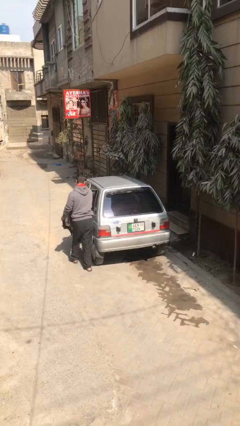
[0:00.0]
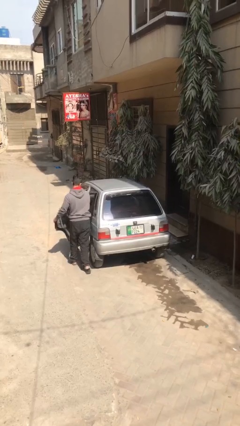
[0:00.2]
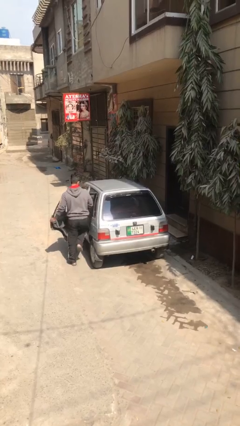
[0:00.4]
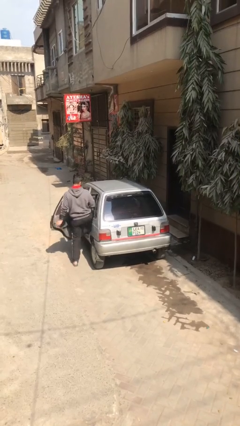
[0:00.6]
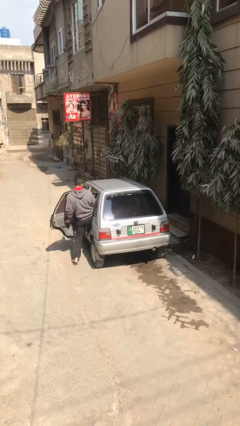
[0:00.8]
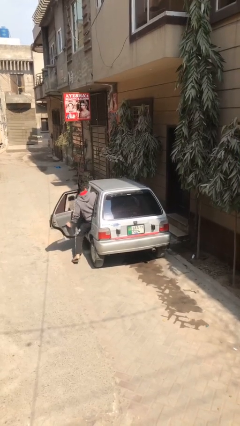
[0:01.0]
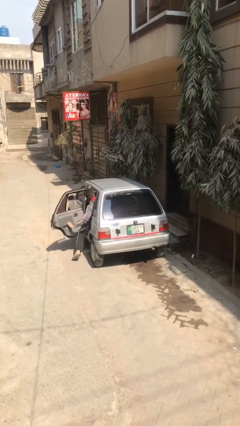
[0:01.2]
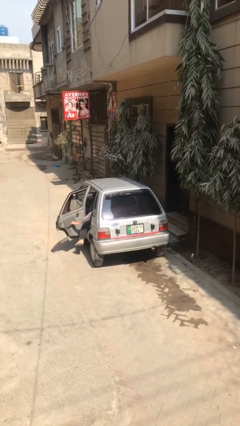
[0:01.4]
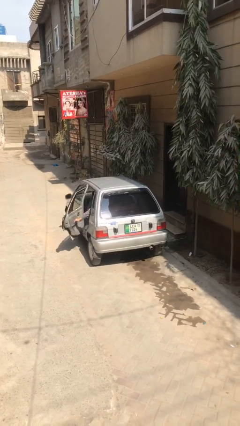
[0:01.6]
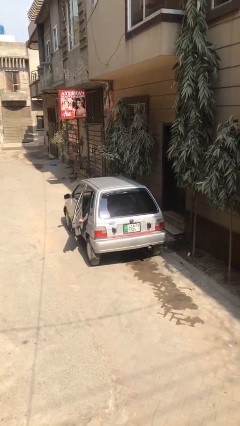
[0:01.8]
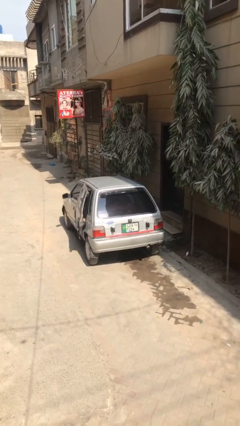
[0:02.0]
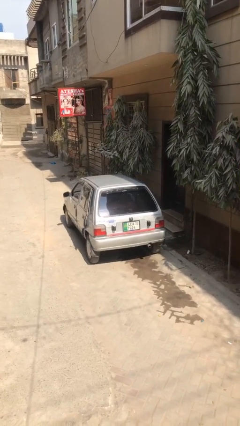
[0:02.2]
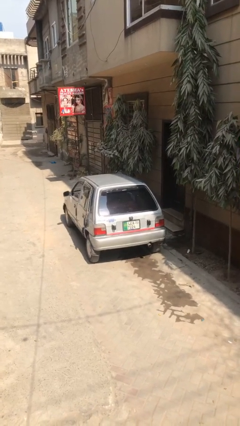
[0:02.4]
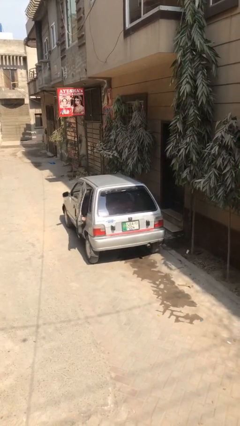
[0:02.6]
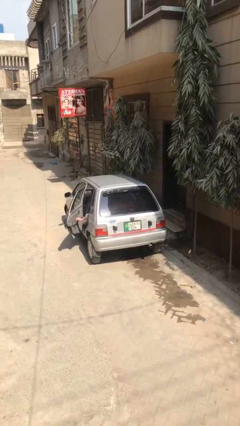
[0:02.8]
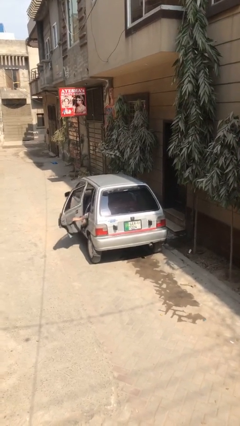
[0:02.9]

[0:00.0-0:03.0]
car picks up person

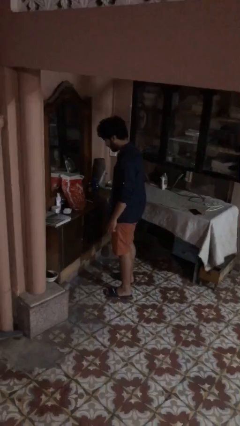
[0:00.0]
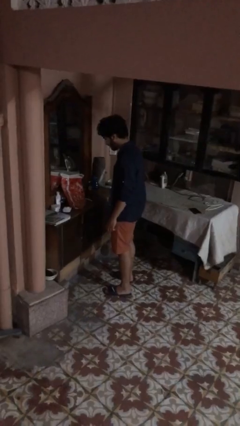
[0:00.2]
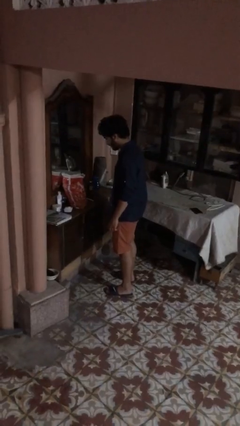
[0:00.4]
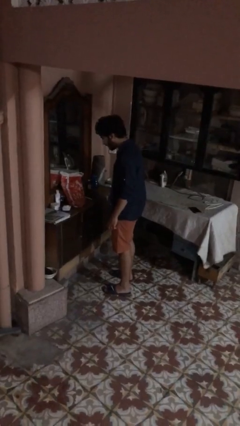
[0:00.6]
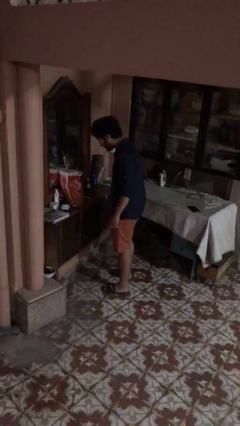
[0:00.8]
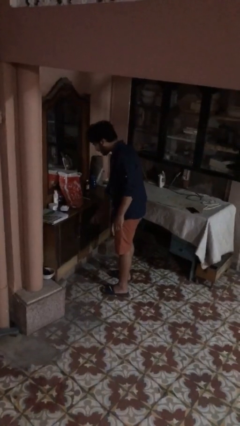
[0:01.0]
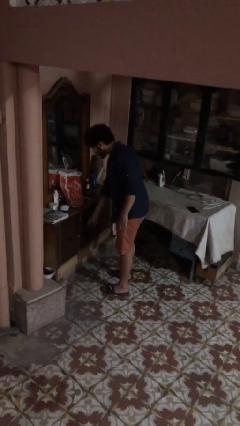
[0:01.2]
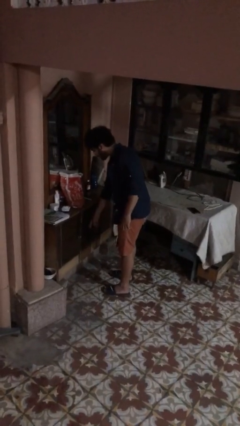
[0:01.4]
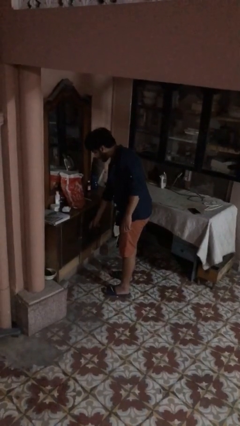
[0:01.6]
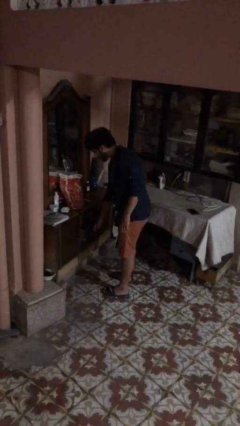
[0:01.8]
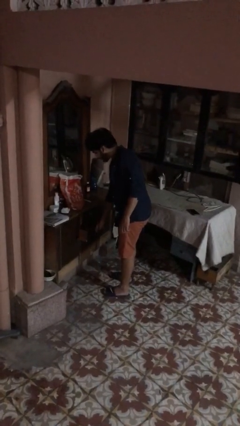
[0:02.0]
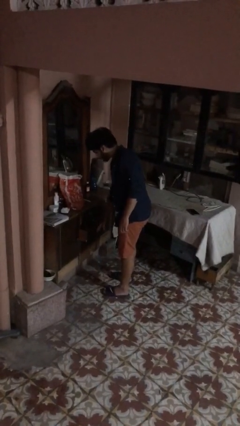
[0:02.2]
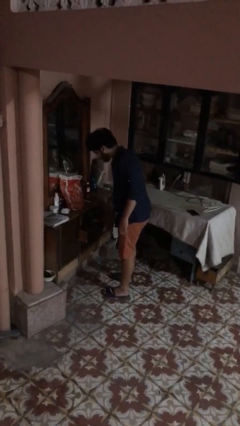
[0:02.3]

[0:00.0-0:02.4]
person opens dresser drawer

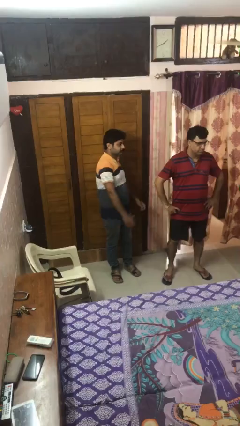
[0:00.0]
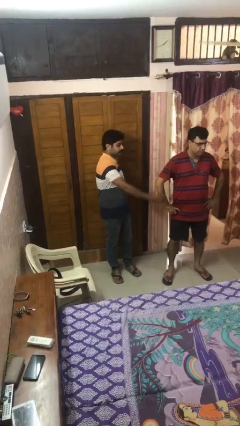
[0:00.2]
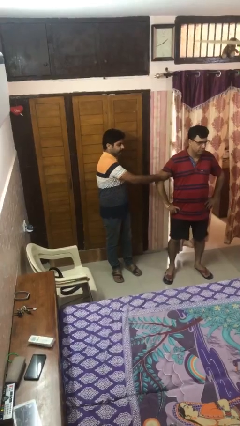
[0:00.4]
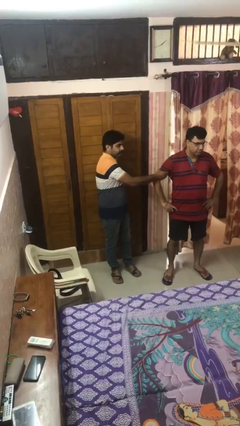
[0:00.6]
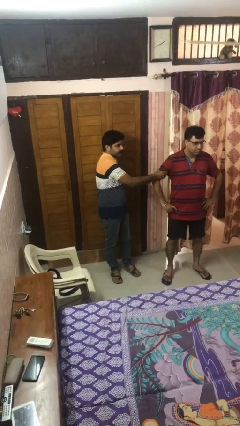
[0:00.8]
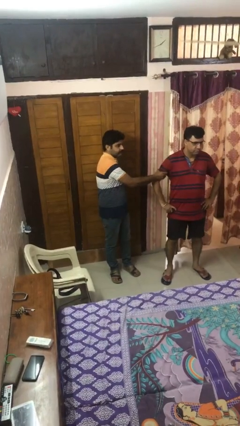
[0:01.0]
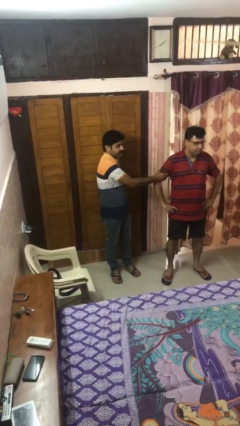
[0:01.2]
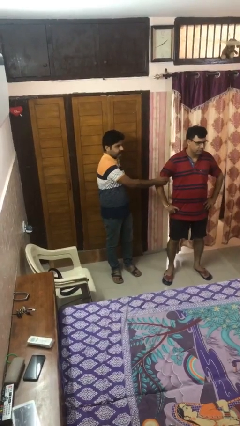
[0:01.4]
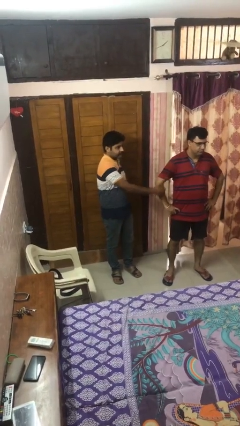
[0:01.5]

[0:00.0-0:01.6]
person grabs person by bicep

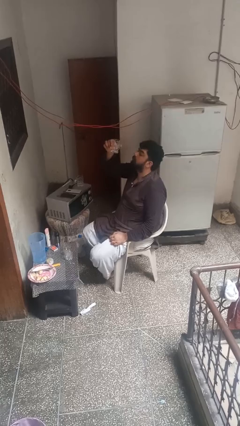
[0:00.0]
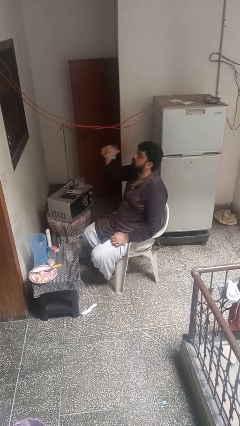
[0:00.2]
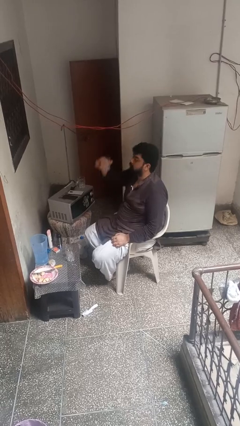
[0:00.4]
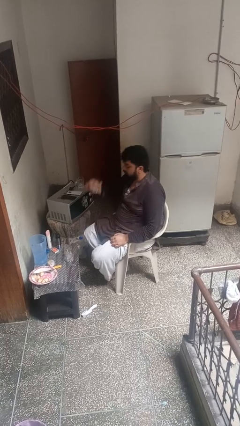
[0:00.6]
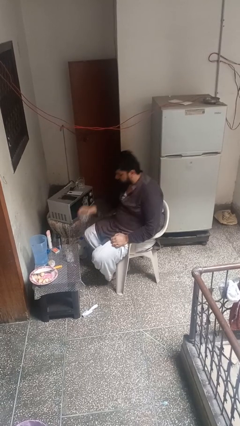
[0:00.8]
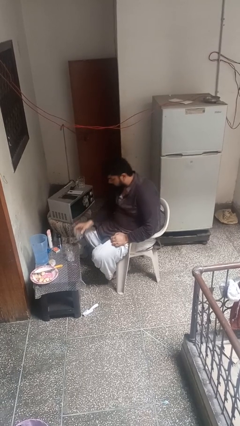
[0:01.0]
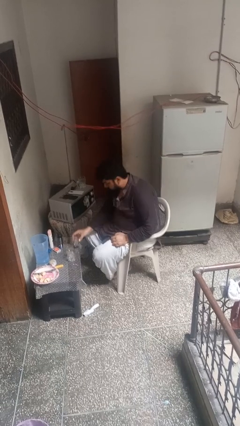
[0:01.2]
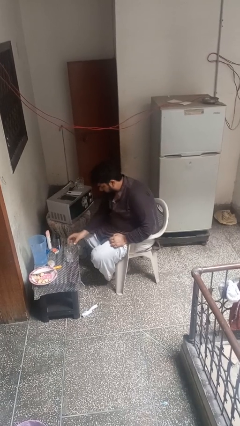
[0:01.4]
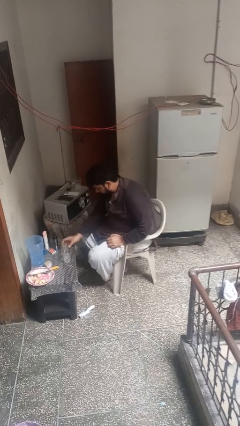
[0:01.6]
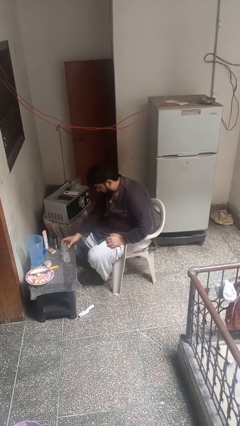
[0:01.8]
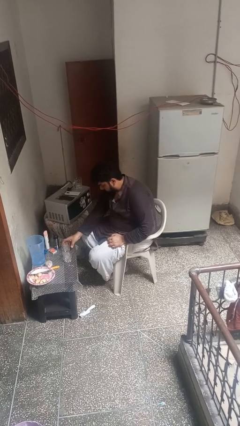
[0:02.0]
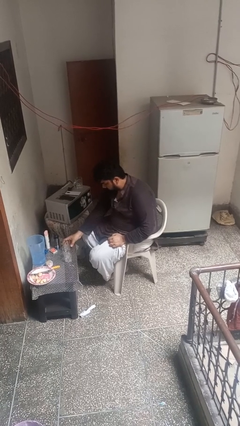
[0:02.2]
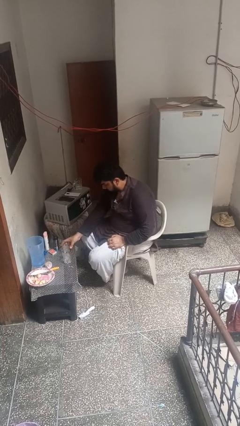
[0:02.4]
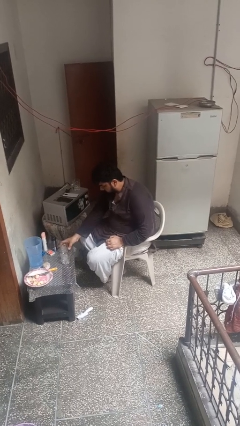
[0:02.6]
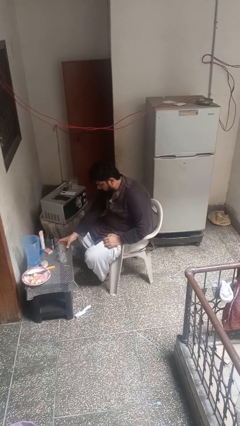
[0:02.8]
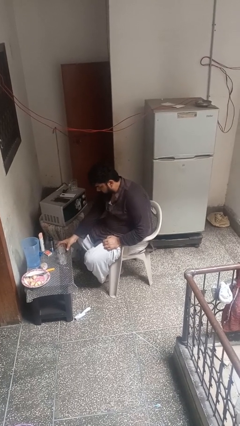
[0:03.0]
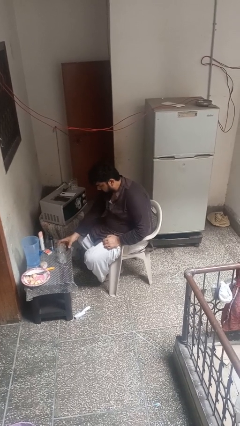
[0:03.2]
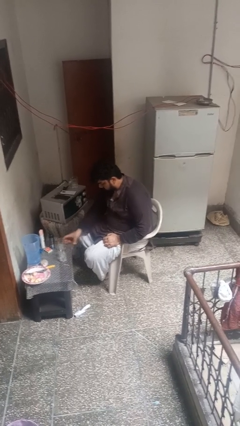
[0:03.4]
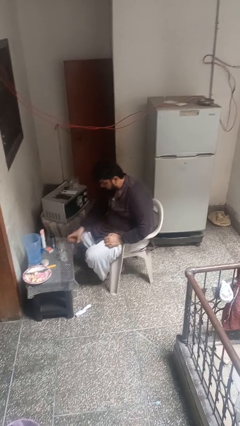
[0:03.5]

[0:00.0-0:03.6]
person puts down object on table

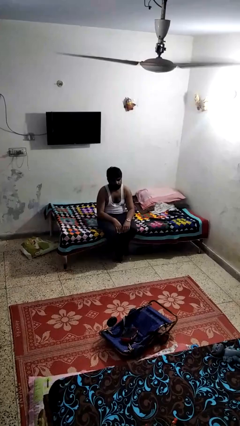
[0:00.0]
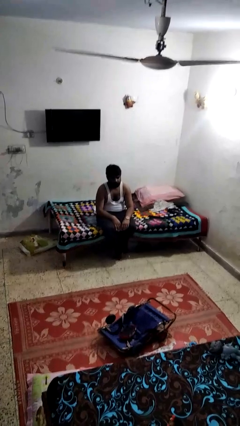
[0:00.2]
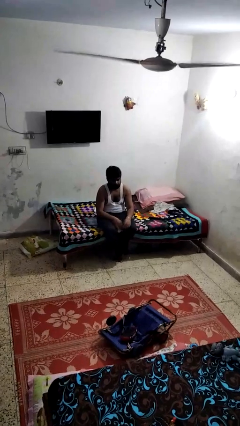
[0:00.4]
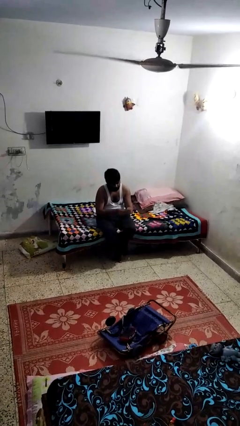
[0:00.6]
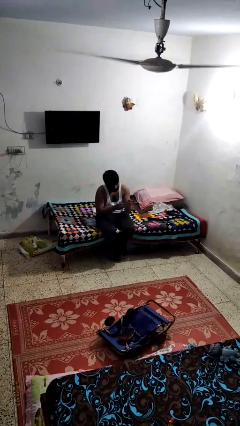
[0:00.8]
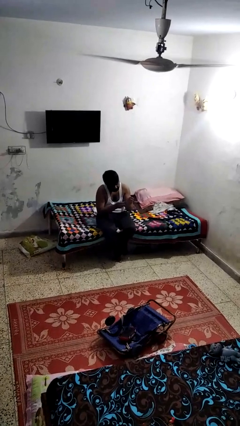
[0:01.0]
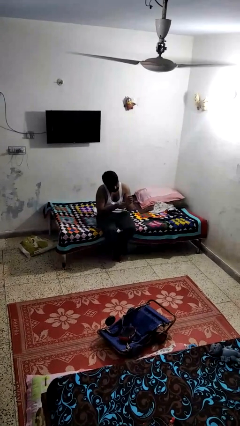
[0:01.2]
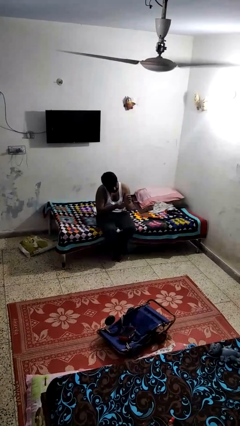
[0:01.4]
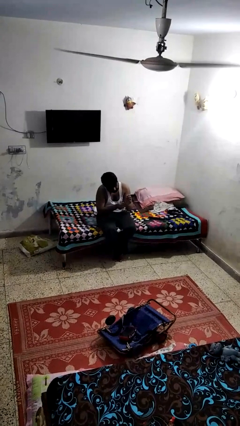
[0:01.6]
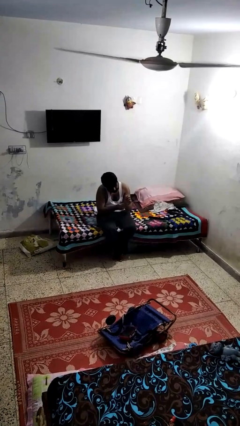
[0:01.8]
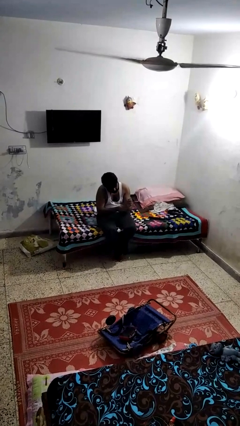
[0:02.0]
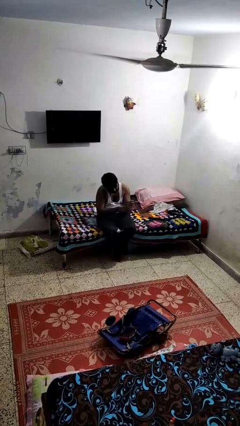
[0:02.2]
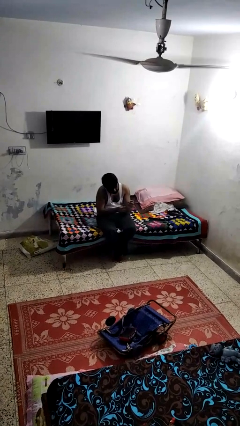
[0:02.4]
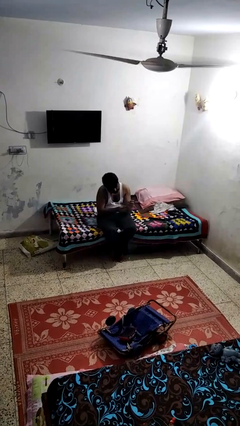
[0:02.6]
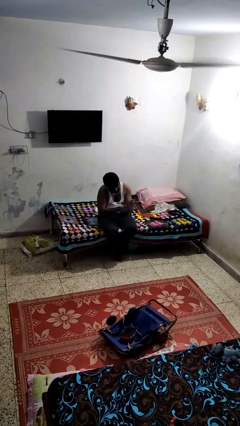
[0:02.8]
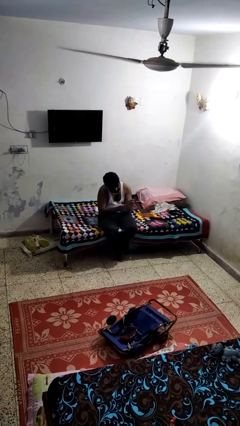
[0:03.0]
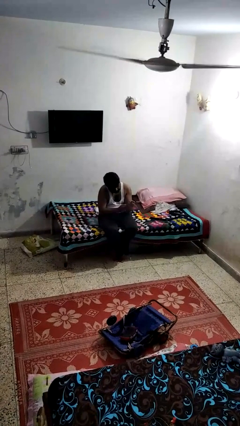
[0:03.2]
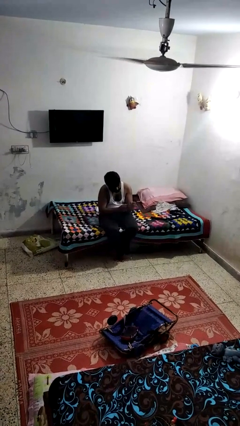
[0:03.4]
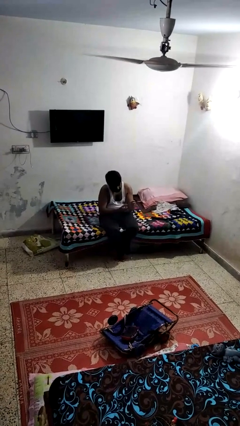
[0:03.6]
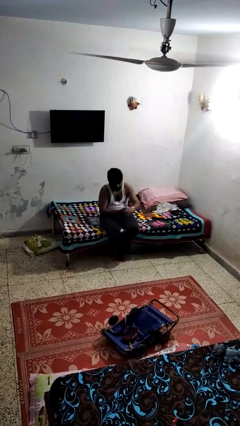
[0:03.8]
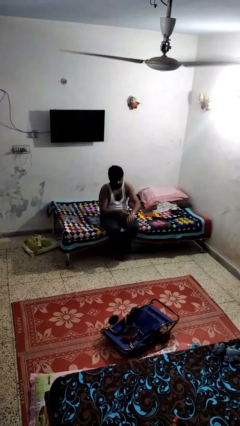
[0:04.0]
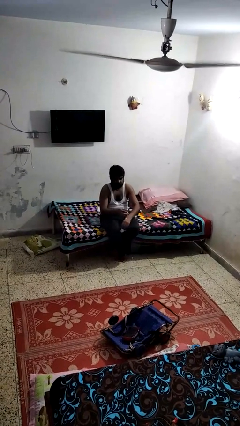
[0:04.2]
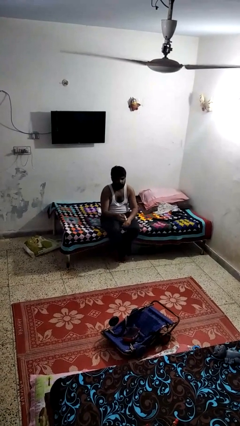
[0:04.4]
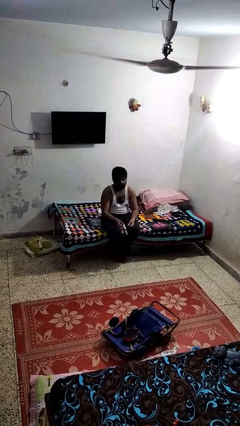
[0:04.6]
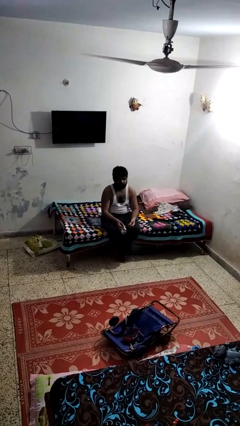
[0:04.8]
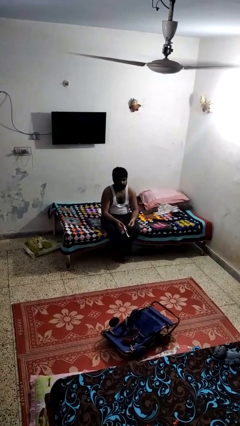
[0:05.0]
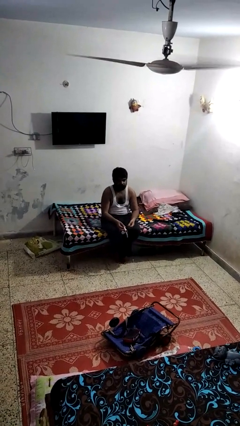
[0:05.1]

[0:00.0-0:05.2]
person takes off wristwatch

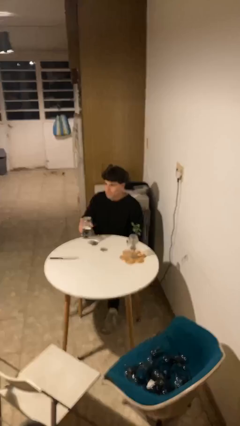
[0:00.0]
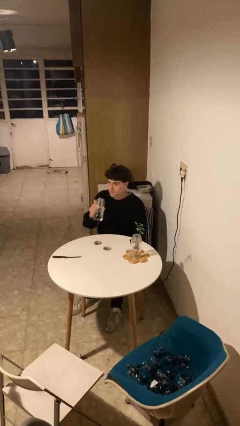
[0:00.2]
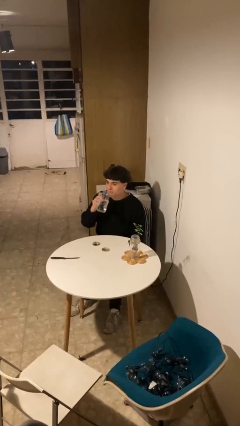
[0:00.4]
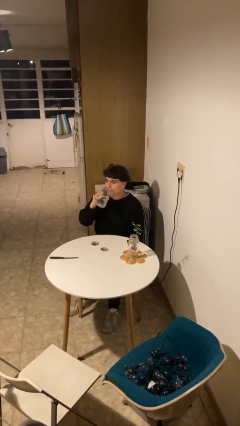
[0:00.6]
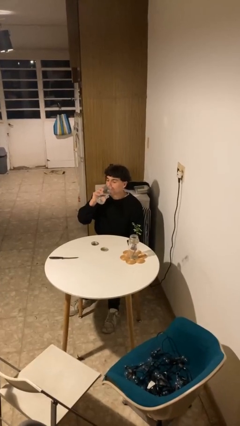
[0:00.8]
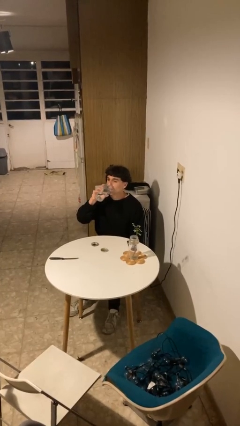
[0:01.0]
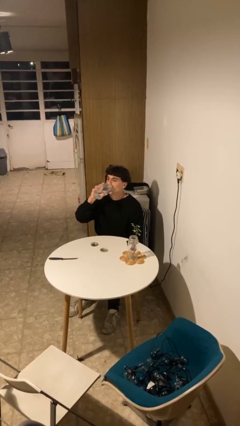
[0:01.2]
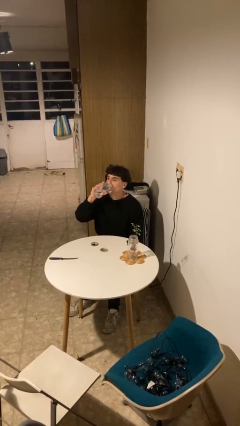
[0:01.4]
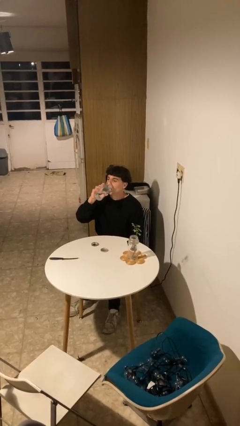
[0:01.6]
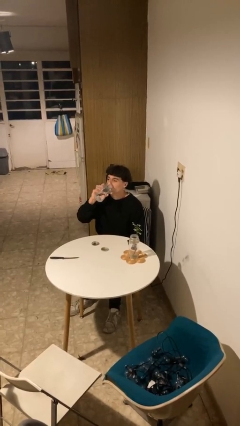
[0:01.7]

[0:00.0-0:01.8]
person drinks from cup
